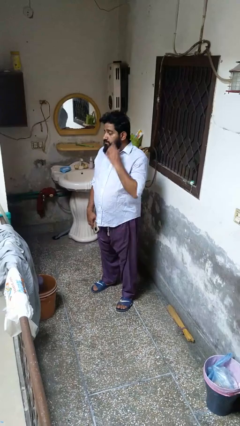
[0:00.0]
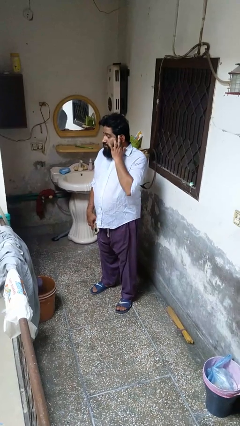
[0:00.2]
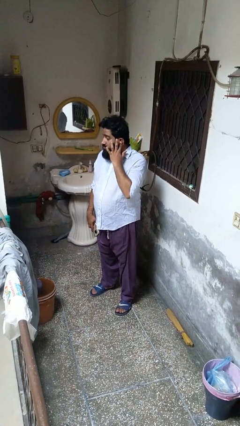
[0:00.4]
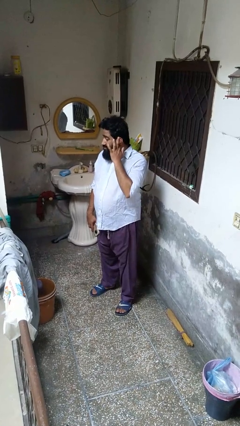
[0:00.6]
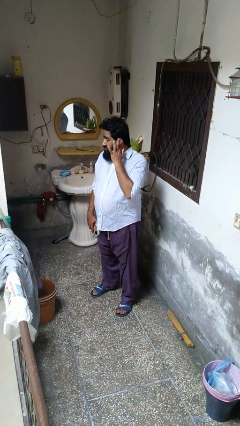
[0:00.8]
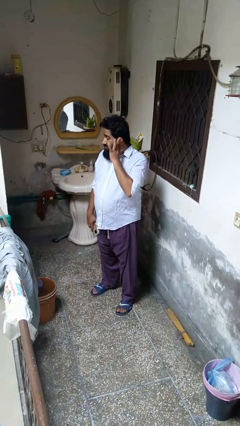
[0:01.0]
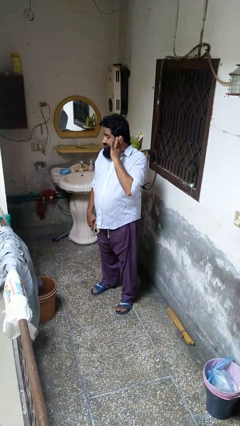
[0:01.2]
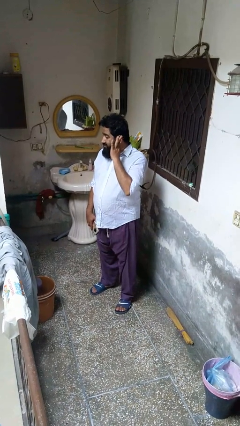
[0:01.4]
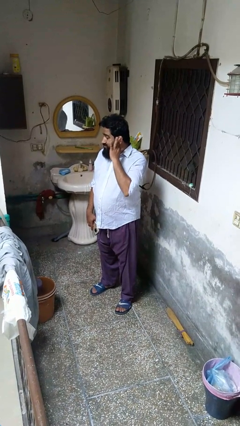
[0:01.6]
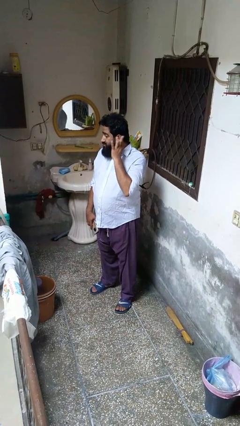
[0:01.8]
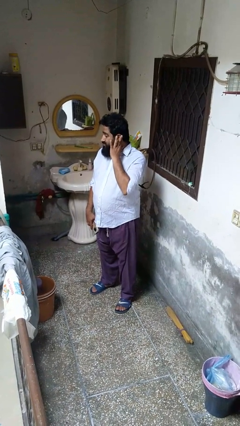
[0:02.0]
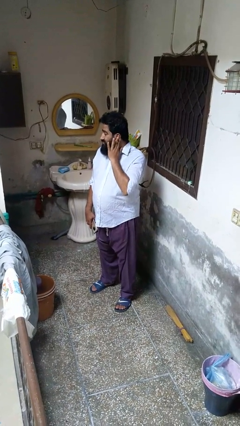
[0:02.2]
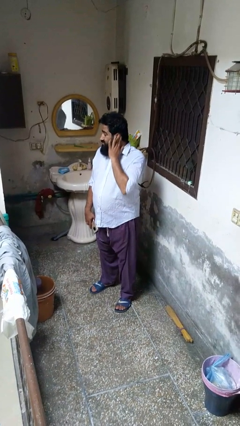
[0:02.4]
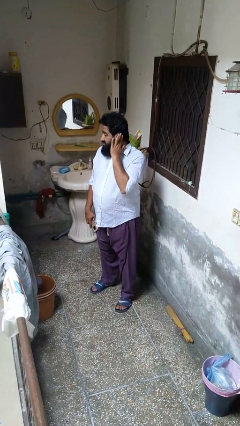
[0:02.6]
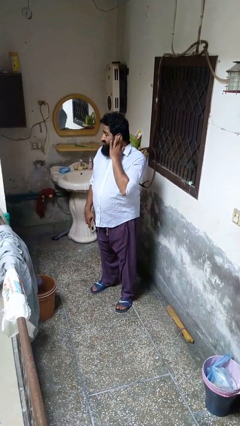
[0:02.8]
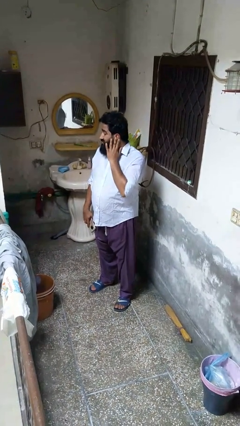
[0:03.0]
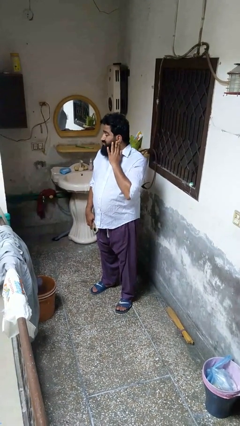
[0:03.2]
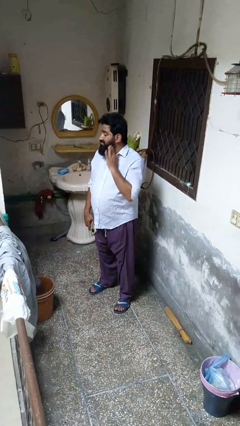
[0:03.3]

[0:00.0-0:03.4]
person touches earlobe

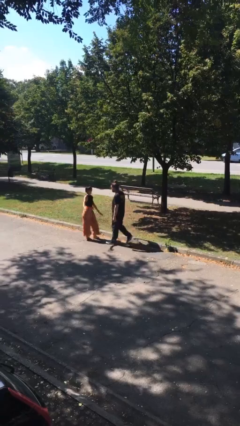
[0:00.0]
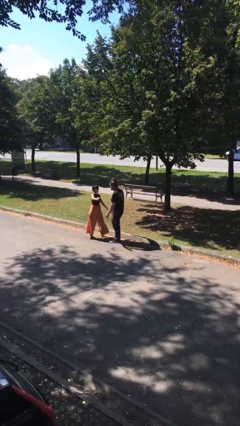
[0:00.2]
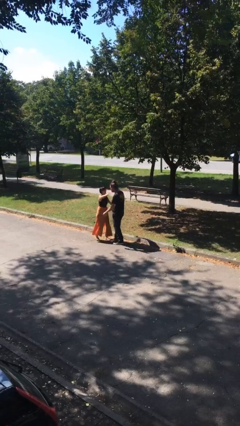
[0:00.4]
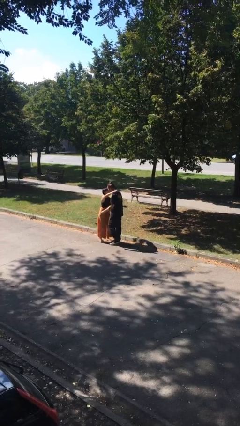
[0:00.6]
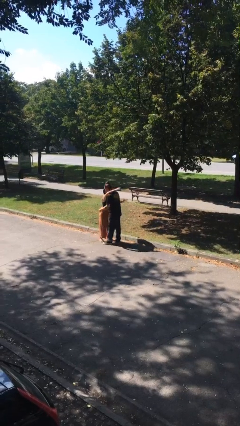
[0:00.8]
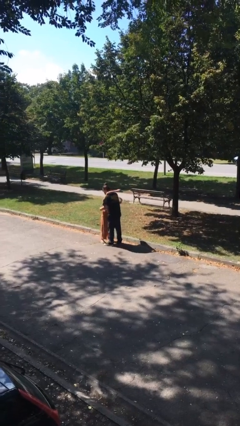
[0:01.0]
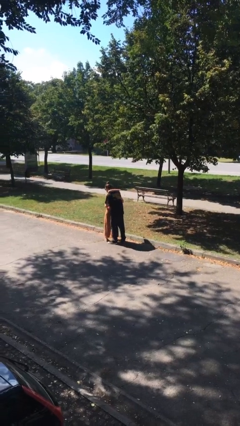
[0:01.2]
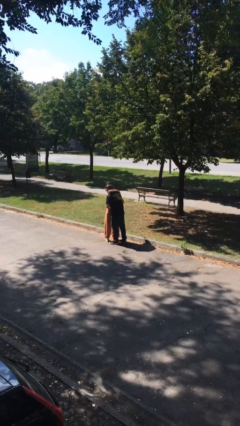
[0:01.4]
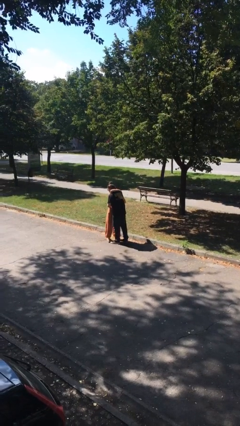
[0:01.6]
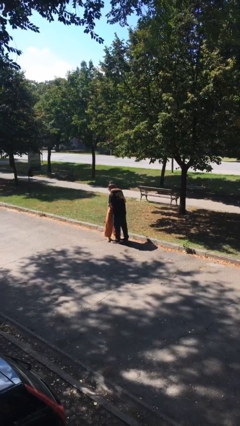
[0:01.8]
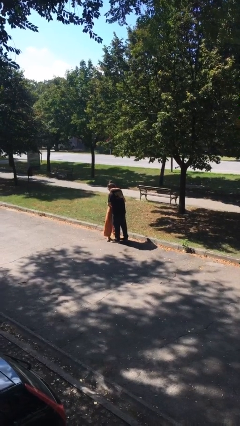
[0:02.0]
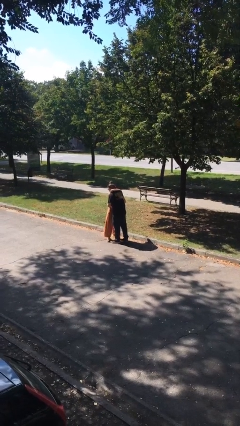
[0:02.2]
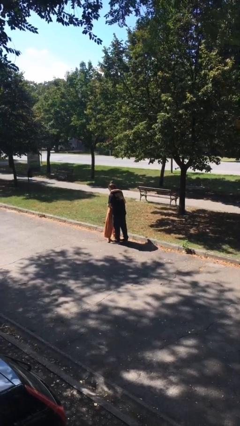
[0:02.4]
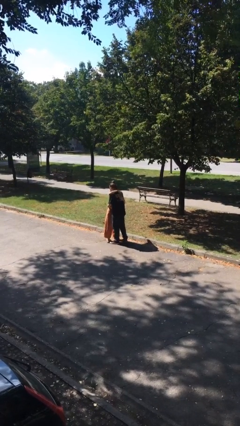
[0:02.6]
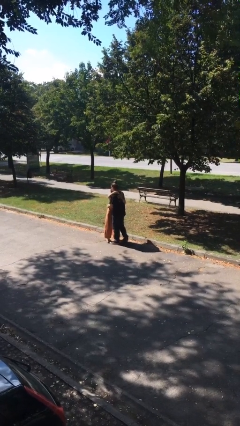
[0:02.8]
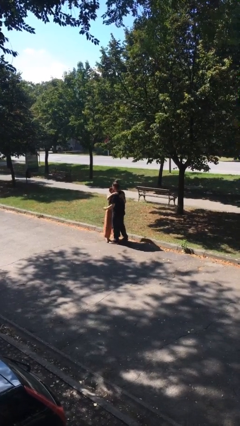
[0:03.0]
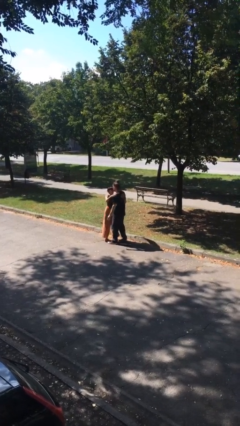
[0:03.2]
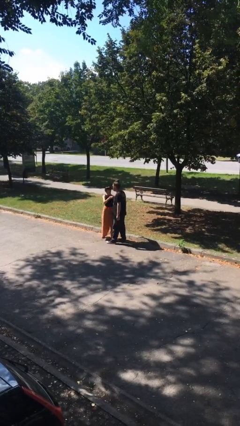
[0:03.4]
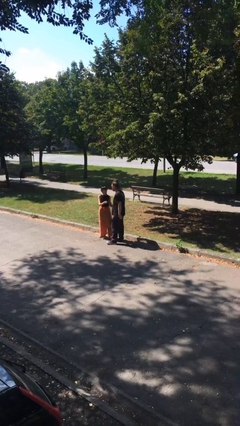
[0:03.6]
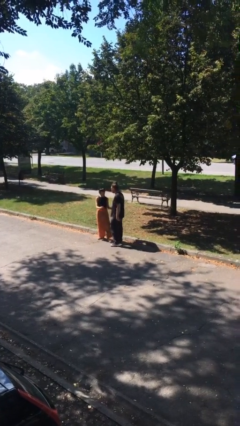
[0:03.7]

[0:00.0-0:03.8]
person embraces person

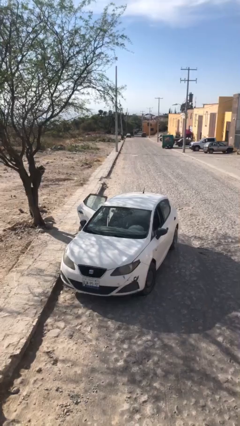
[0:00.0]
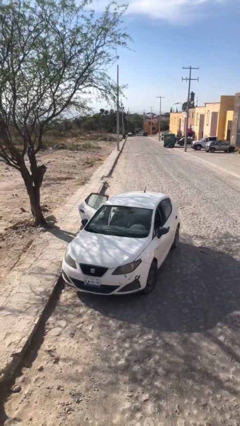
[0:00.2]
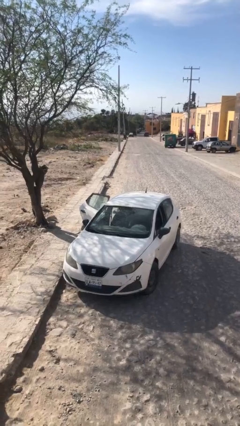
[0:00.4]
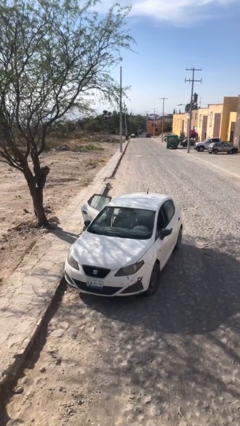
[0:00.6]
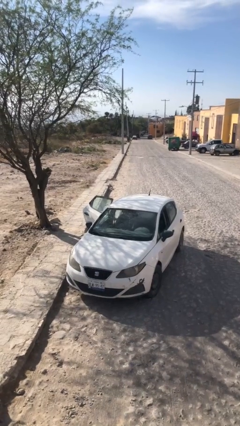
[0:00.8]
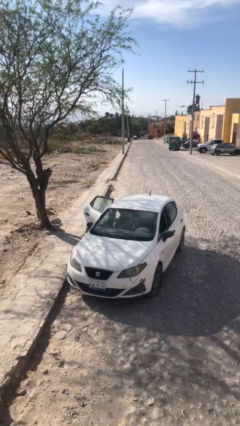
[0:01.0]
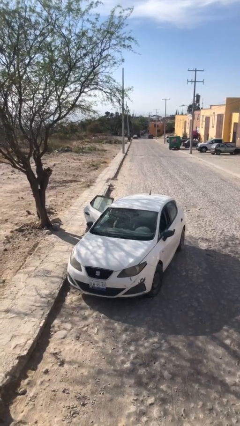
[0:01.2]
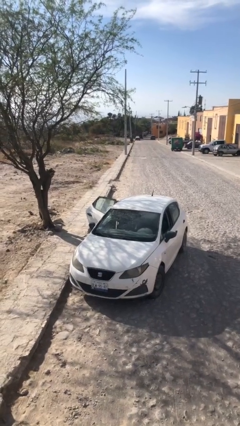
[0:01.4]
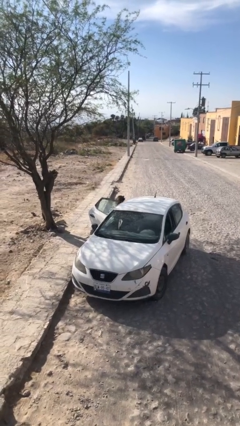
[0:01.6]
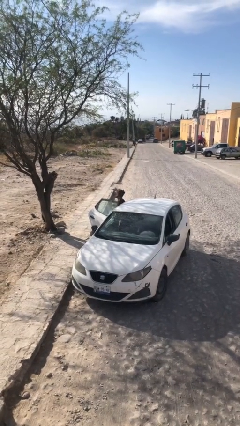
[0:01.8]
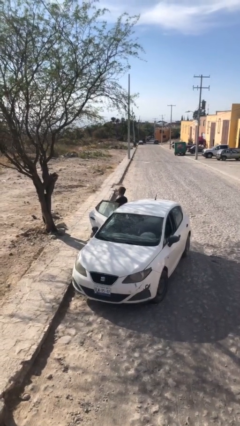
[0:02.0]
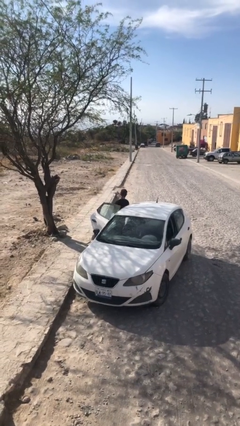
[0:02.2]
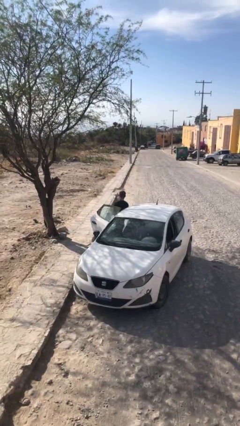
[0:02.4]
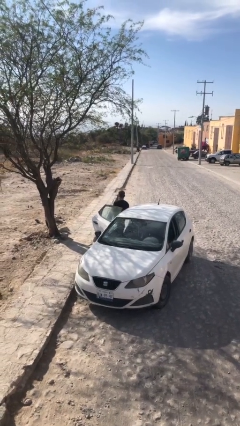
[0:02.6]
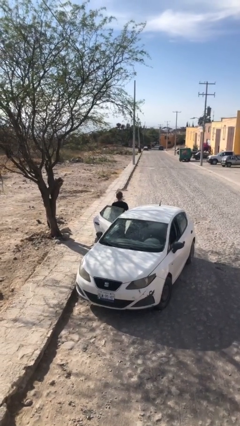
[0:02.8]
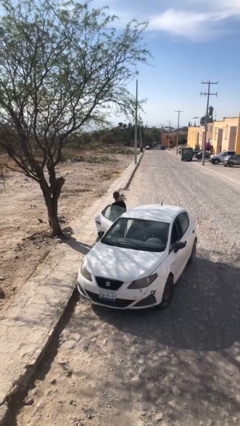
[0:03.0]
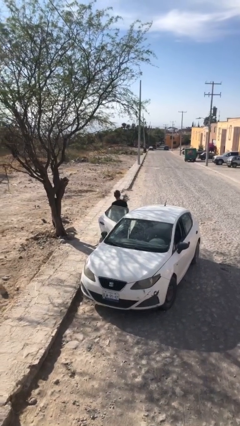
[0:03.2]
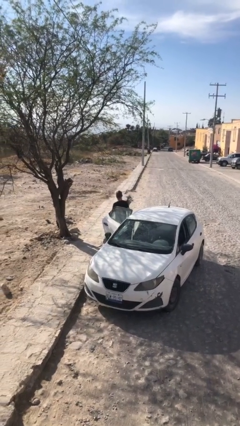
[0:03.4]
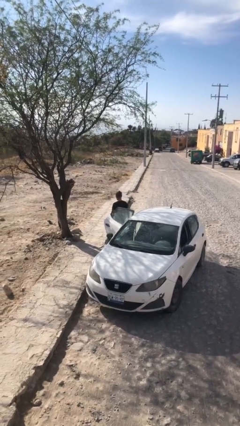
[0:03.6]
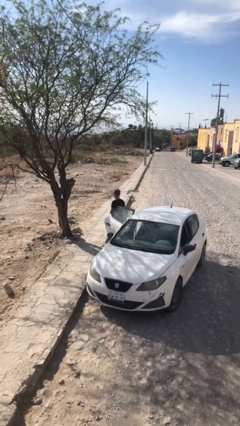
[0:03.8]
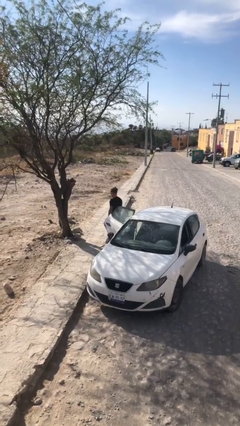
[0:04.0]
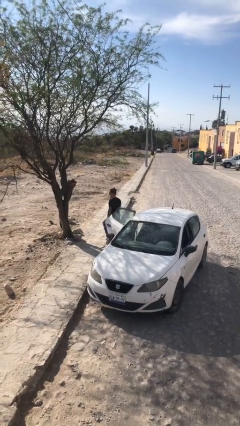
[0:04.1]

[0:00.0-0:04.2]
person exits car

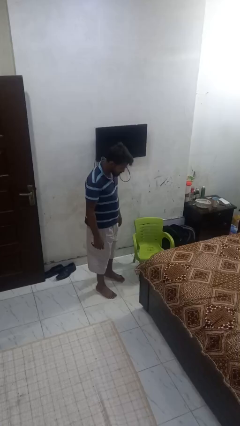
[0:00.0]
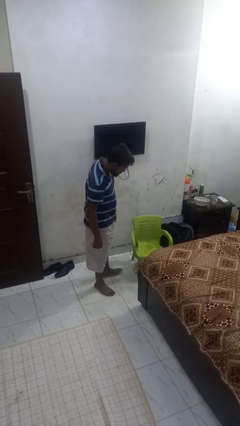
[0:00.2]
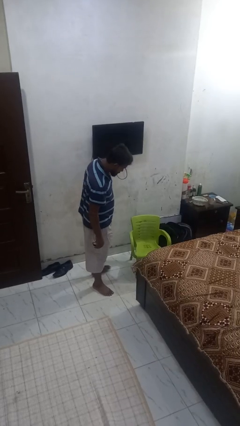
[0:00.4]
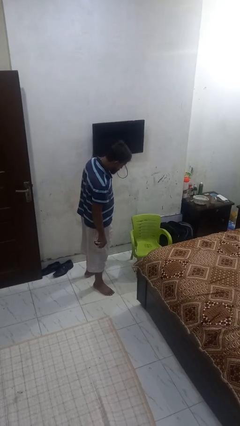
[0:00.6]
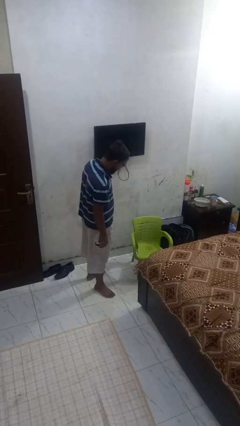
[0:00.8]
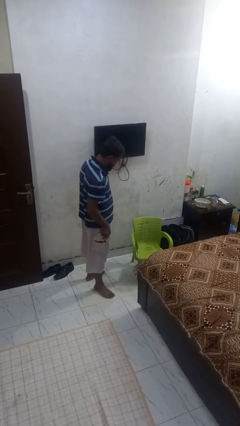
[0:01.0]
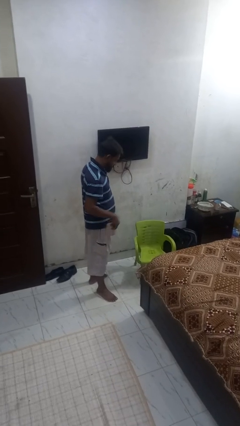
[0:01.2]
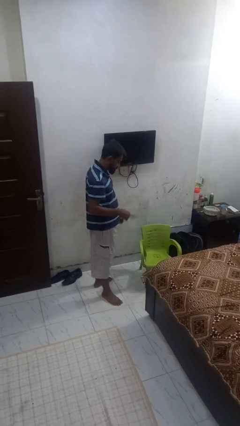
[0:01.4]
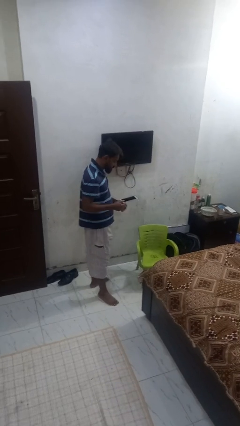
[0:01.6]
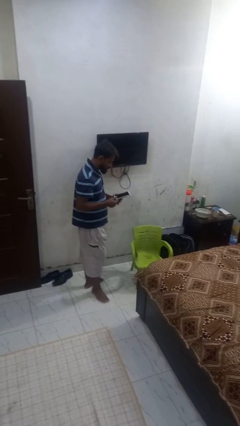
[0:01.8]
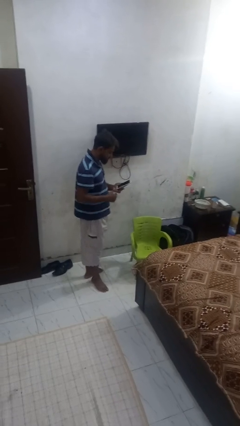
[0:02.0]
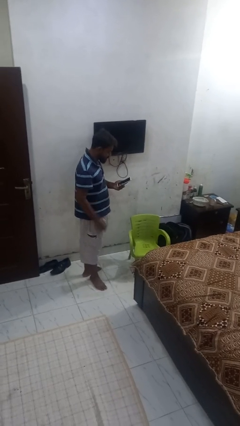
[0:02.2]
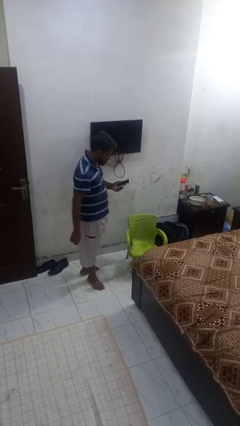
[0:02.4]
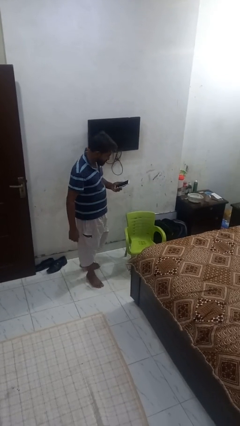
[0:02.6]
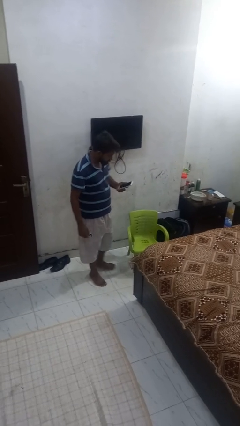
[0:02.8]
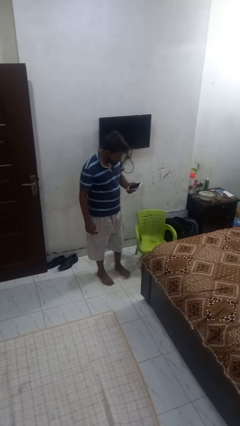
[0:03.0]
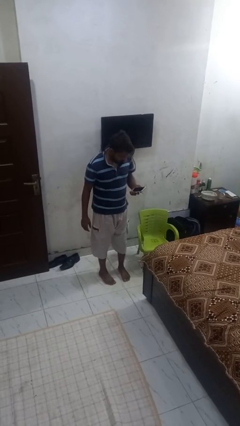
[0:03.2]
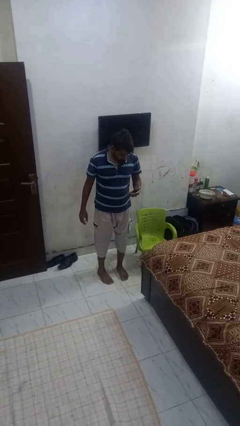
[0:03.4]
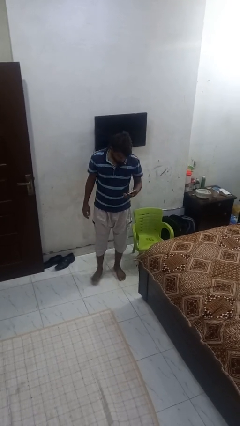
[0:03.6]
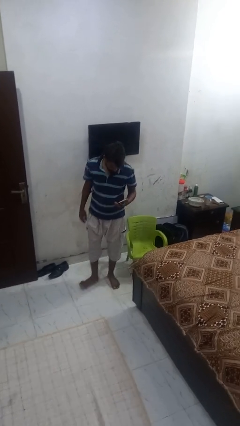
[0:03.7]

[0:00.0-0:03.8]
person takes phone from pocket

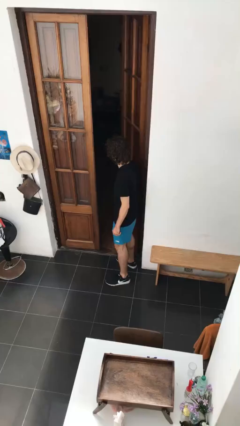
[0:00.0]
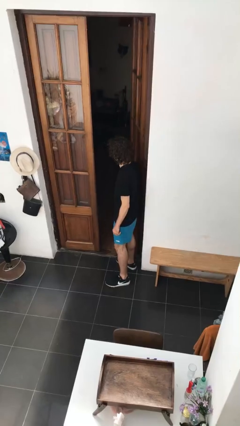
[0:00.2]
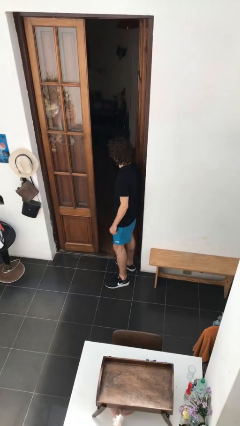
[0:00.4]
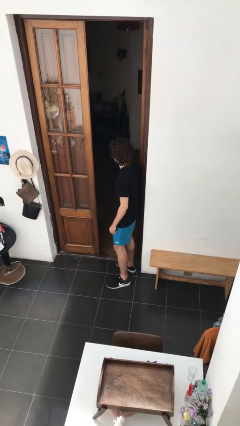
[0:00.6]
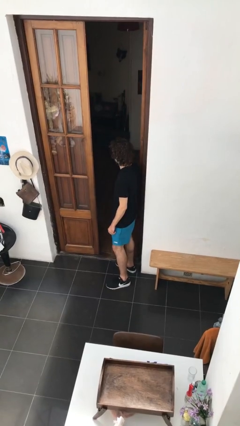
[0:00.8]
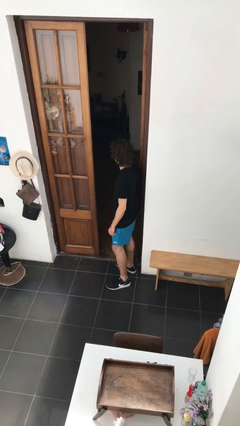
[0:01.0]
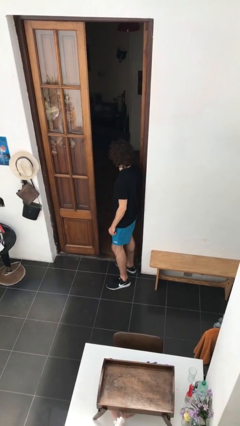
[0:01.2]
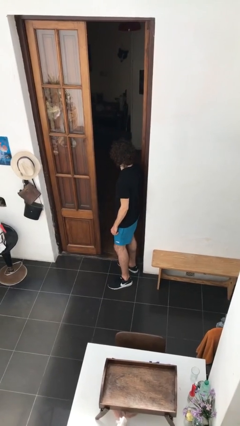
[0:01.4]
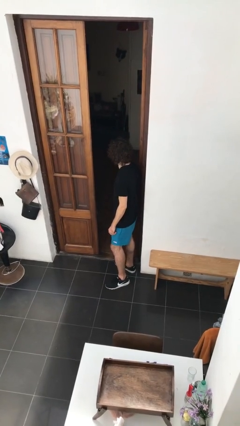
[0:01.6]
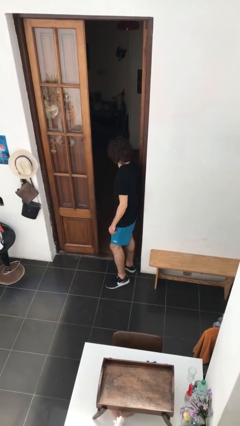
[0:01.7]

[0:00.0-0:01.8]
person opens facility door

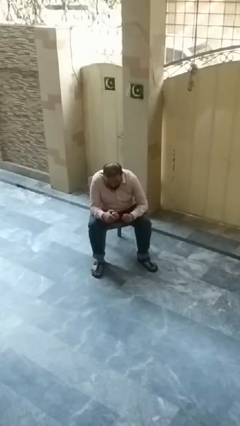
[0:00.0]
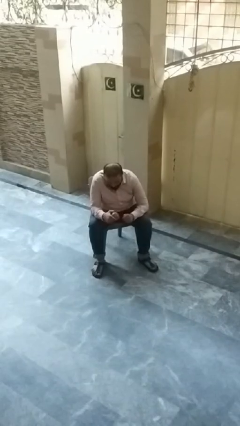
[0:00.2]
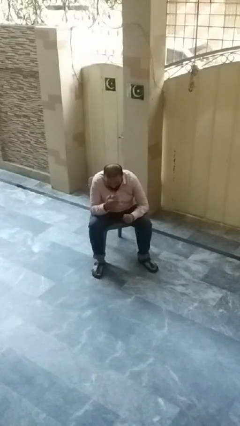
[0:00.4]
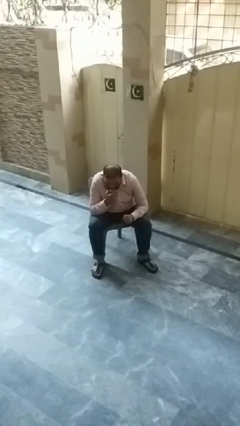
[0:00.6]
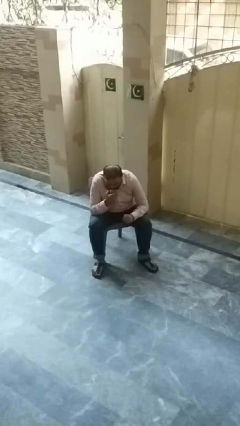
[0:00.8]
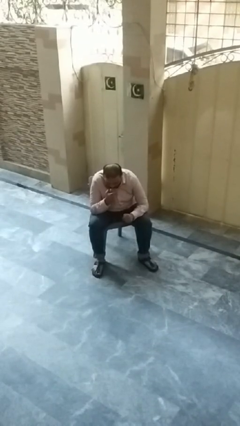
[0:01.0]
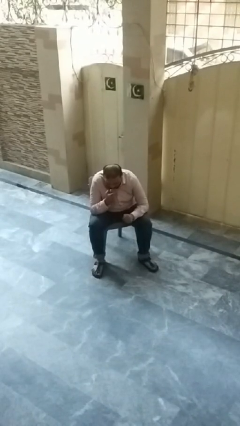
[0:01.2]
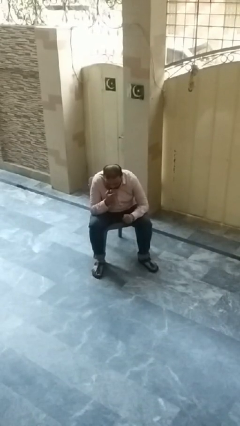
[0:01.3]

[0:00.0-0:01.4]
person eats apple
